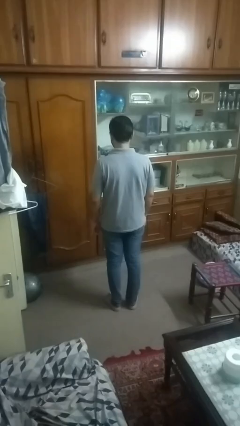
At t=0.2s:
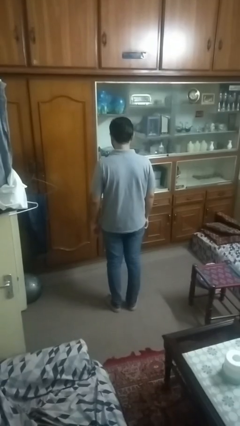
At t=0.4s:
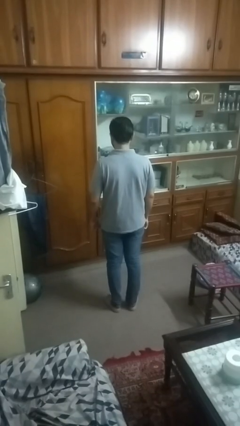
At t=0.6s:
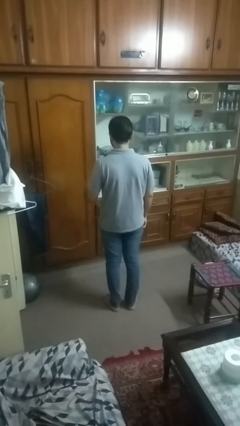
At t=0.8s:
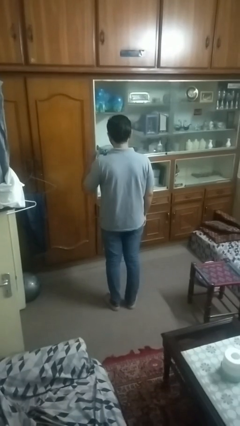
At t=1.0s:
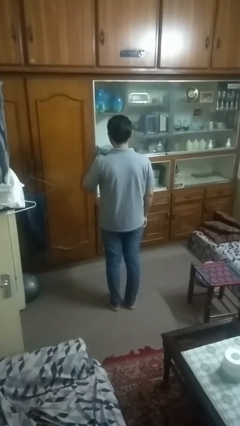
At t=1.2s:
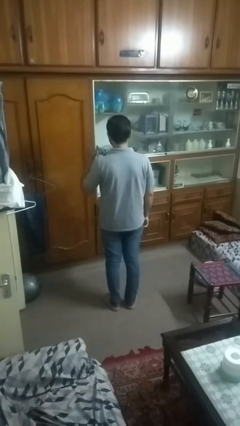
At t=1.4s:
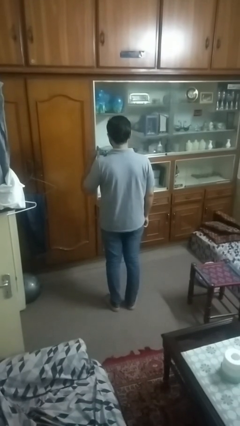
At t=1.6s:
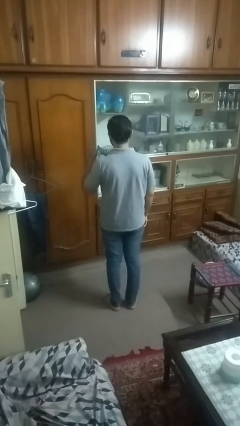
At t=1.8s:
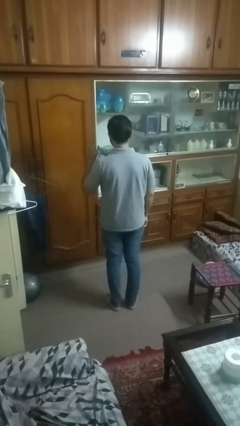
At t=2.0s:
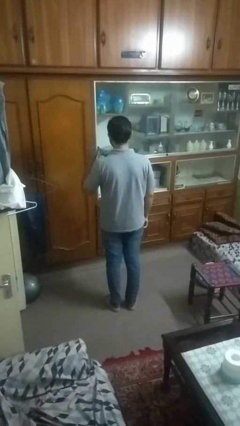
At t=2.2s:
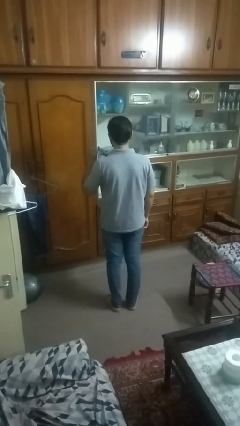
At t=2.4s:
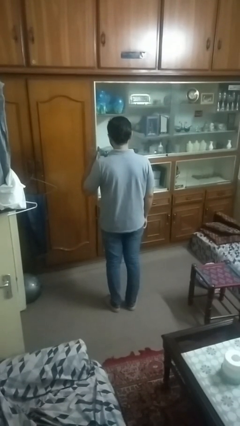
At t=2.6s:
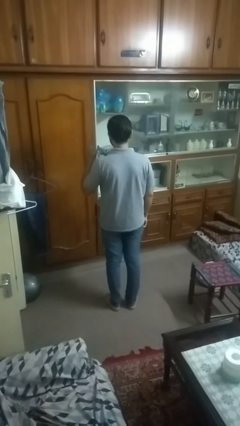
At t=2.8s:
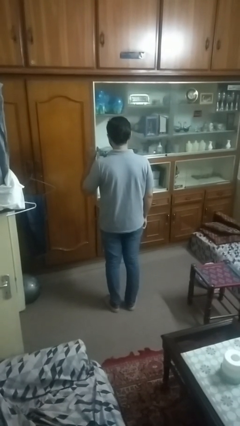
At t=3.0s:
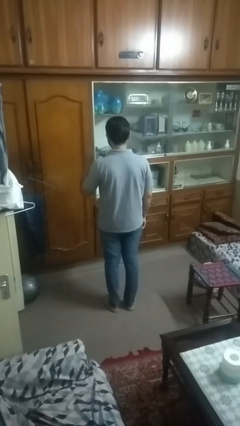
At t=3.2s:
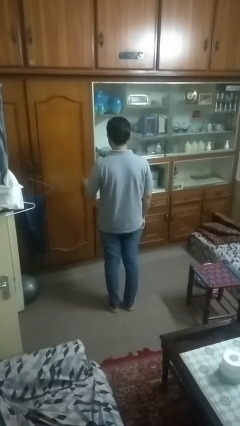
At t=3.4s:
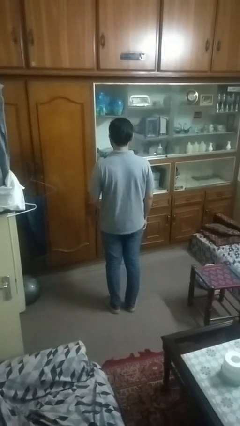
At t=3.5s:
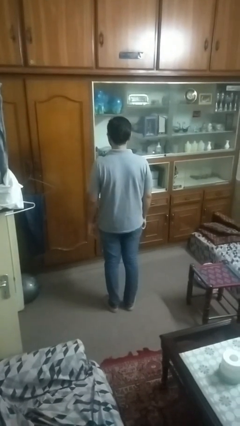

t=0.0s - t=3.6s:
person gestures number one

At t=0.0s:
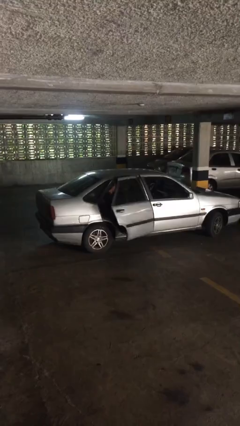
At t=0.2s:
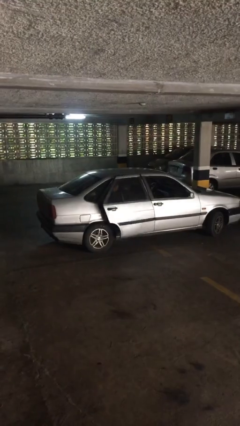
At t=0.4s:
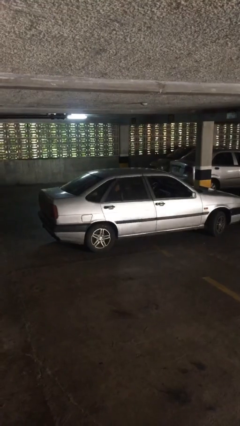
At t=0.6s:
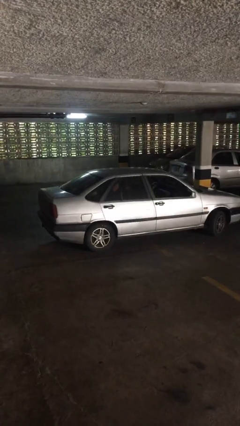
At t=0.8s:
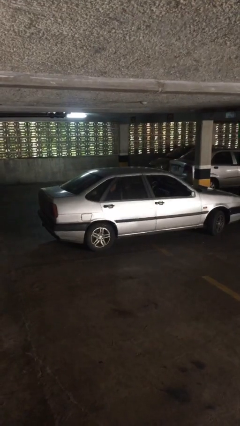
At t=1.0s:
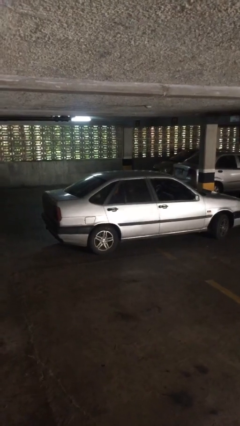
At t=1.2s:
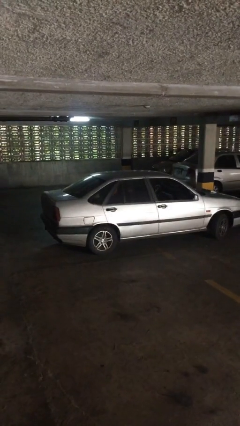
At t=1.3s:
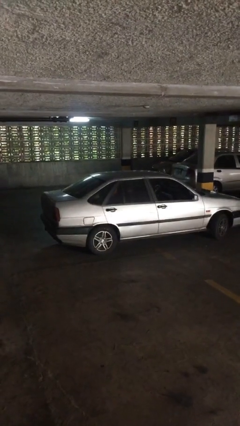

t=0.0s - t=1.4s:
person closes car door

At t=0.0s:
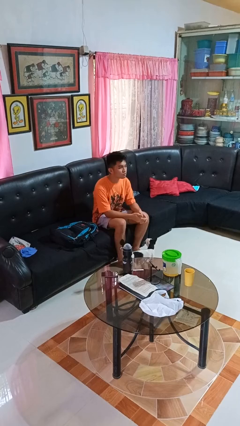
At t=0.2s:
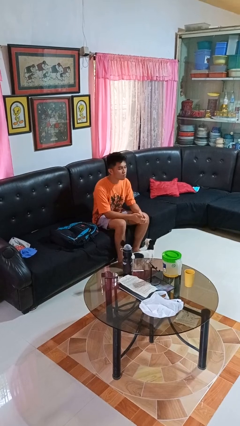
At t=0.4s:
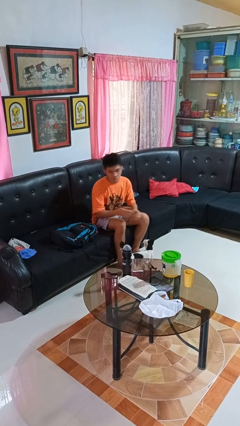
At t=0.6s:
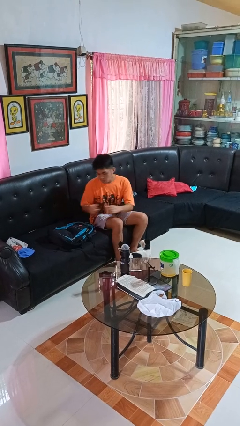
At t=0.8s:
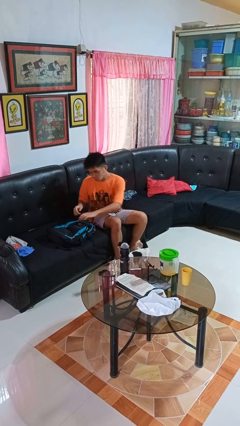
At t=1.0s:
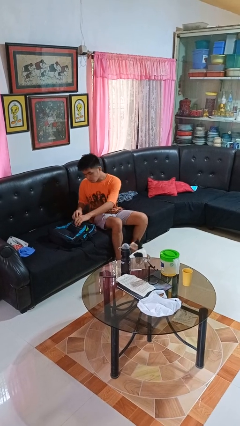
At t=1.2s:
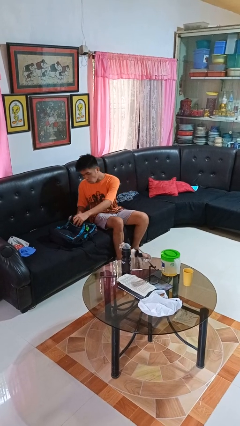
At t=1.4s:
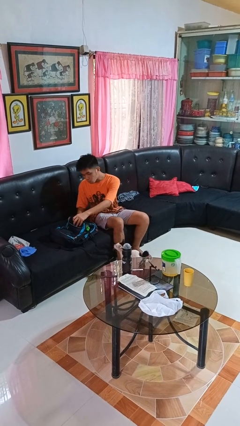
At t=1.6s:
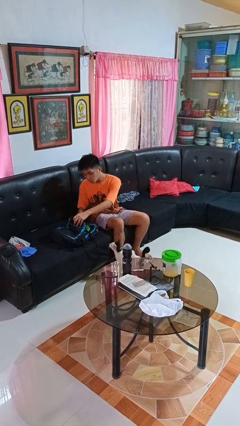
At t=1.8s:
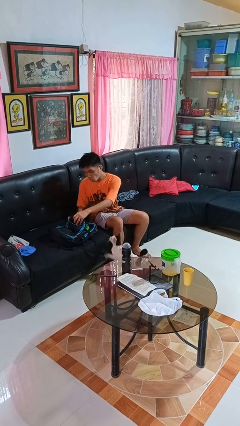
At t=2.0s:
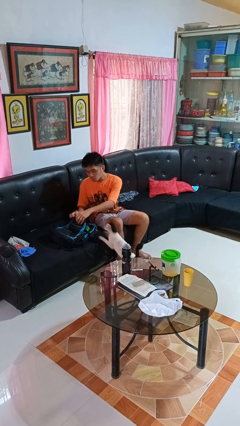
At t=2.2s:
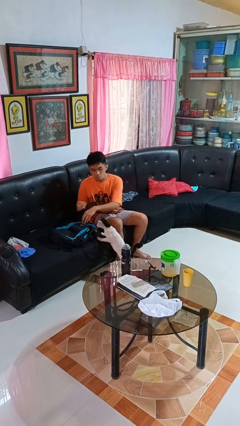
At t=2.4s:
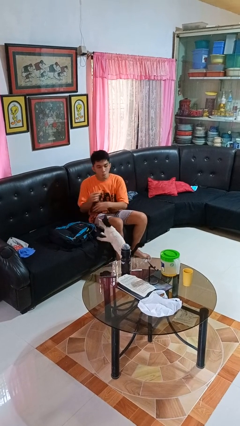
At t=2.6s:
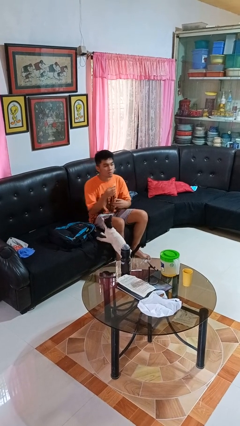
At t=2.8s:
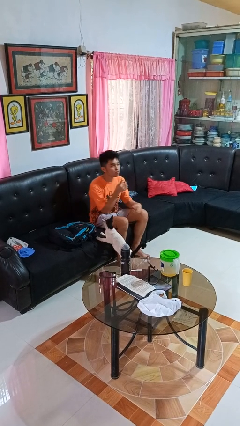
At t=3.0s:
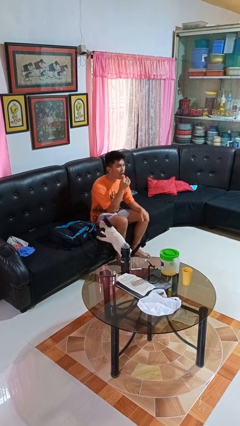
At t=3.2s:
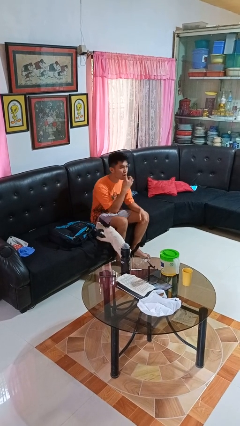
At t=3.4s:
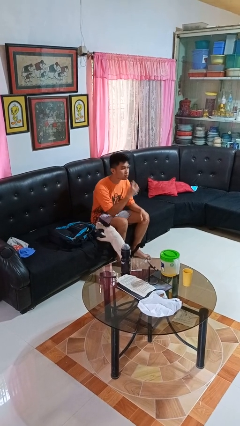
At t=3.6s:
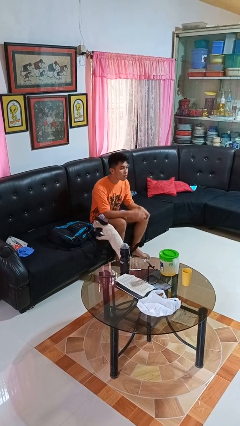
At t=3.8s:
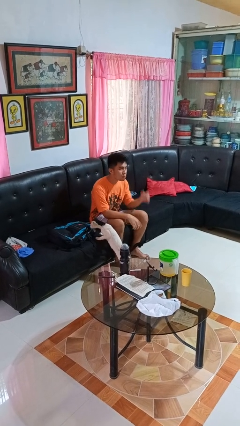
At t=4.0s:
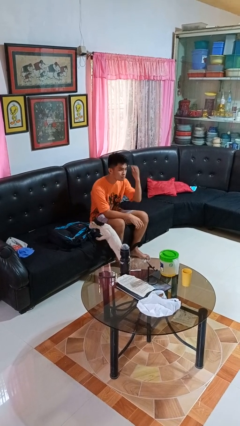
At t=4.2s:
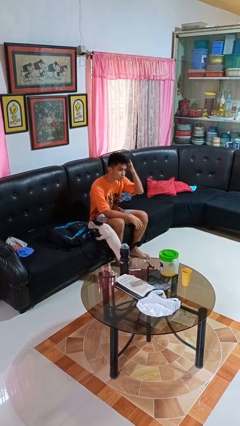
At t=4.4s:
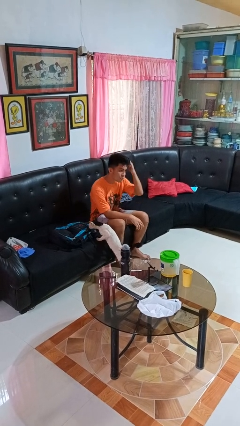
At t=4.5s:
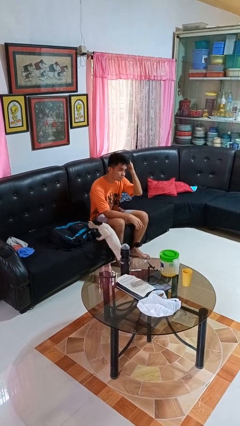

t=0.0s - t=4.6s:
person eats snack from bag

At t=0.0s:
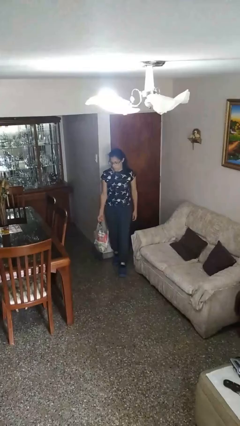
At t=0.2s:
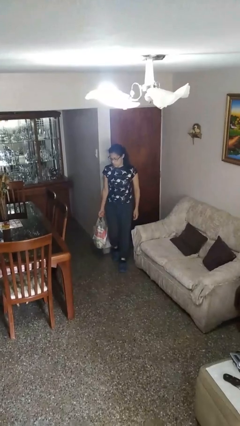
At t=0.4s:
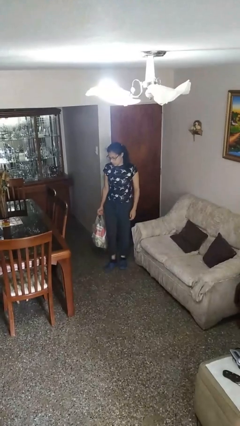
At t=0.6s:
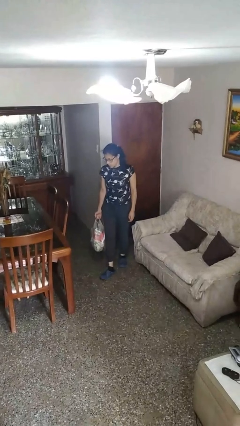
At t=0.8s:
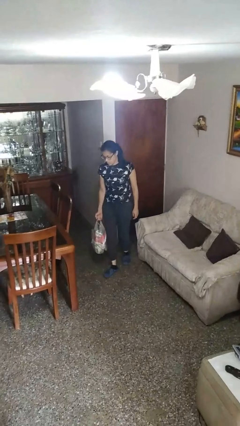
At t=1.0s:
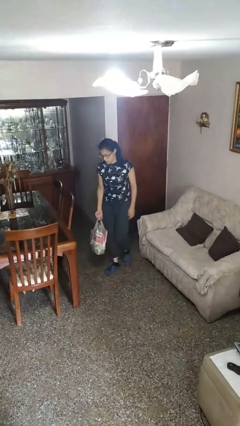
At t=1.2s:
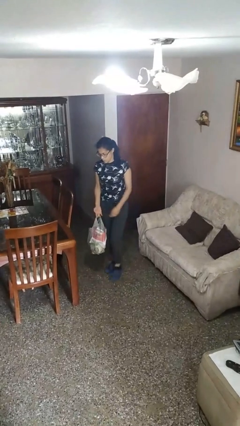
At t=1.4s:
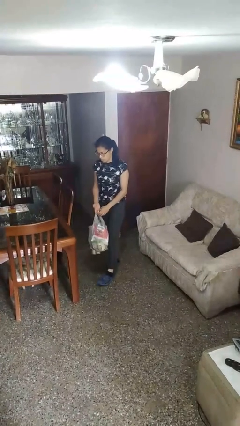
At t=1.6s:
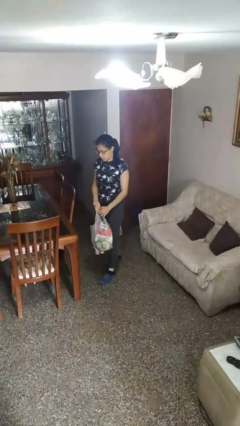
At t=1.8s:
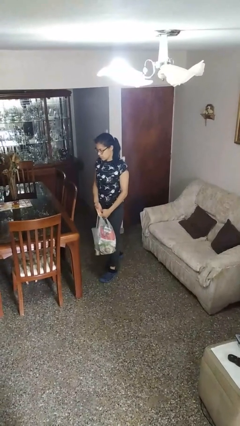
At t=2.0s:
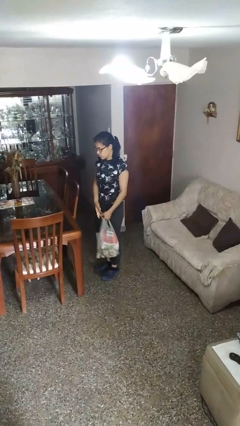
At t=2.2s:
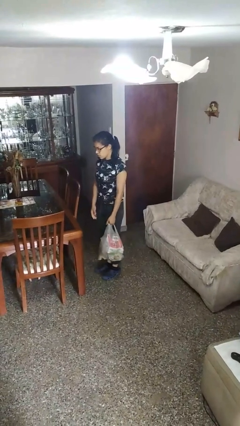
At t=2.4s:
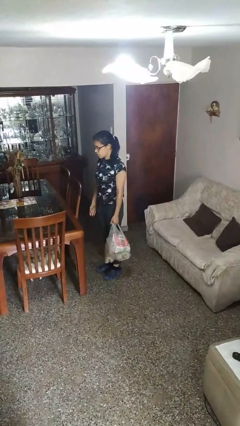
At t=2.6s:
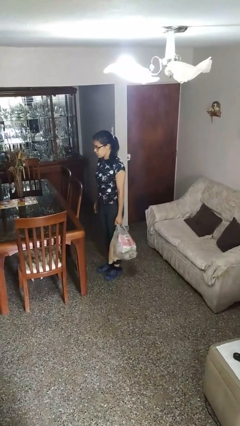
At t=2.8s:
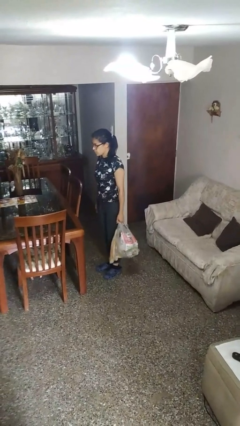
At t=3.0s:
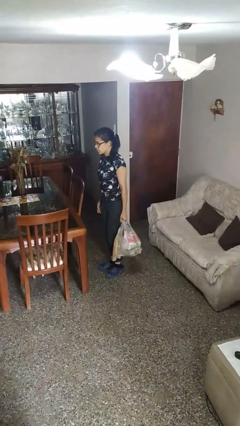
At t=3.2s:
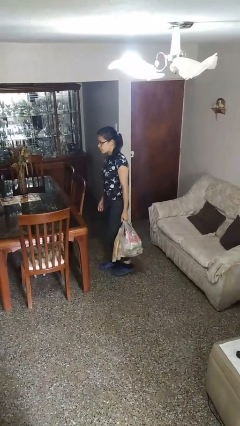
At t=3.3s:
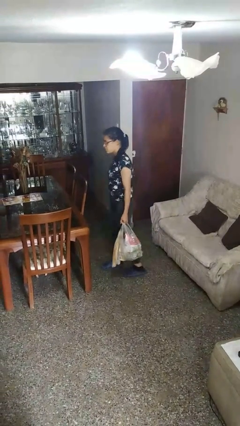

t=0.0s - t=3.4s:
person carries groceries

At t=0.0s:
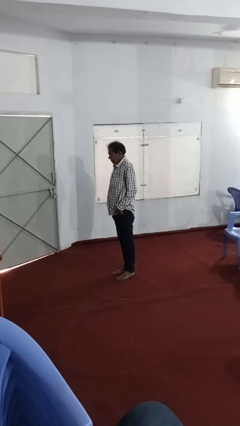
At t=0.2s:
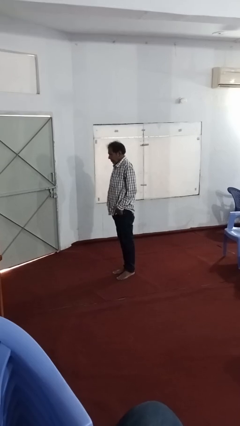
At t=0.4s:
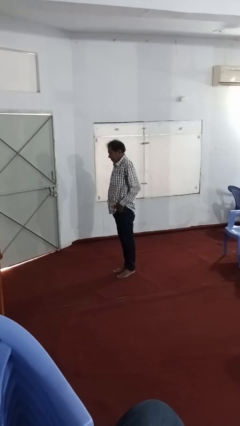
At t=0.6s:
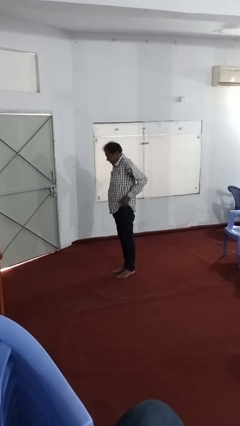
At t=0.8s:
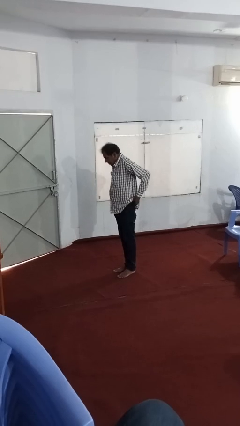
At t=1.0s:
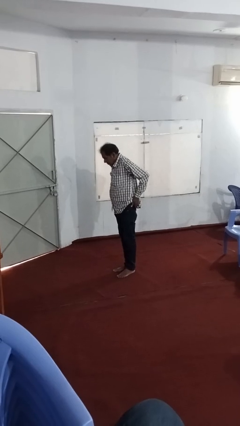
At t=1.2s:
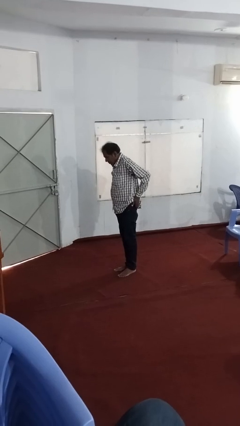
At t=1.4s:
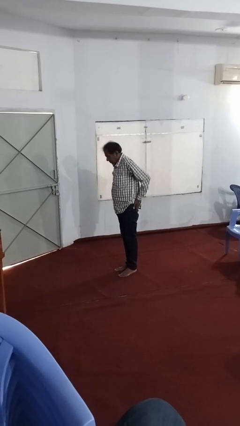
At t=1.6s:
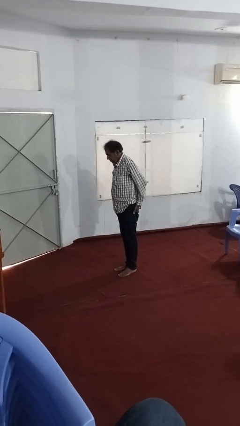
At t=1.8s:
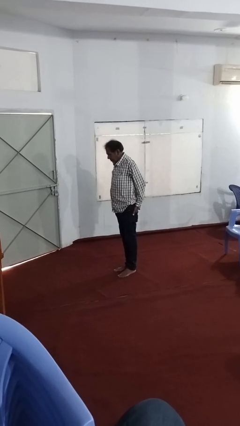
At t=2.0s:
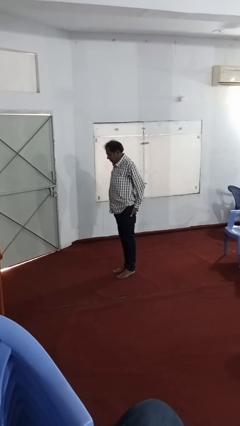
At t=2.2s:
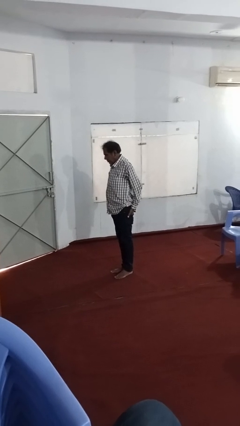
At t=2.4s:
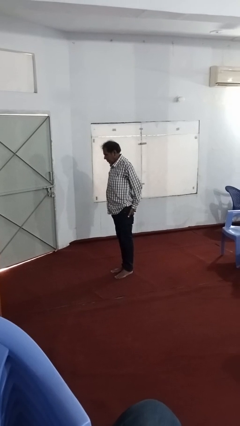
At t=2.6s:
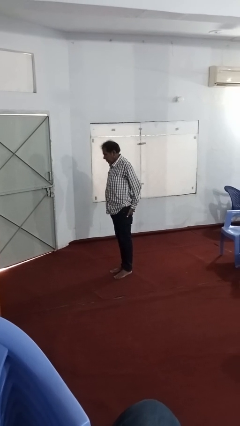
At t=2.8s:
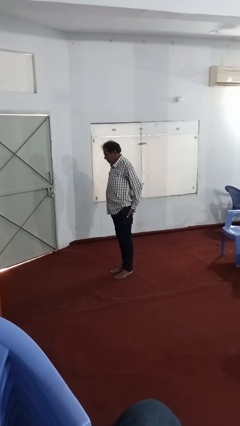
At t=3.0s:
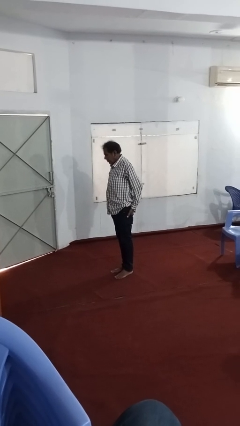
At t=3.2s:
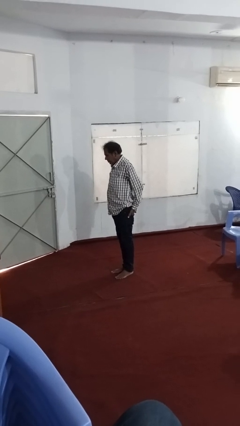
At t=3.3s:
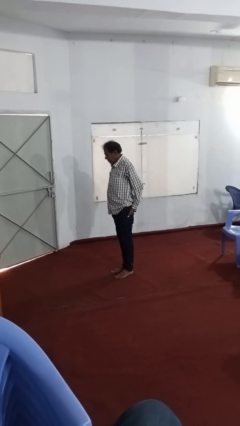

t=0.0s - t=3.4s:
person puts hands in back pockets

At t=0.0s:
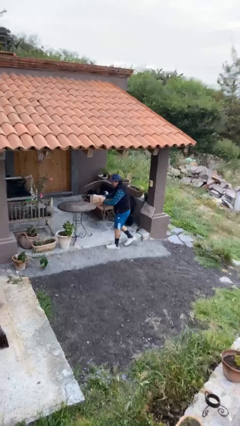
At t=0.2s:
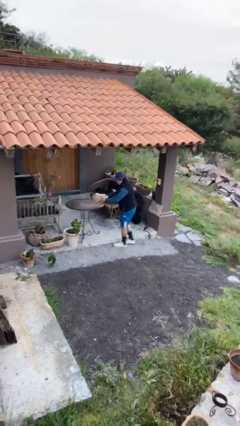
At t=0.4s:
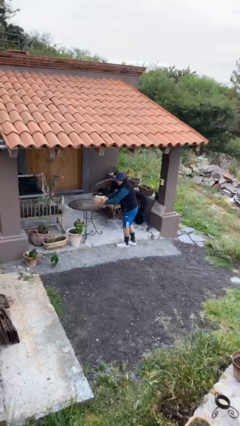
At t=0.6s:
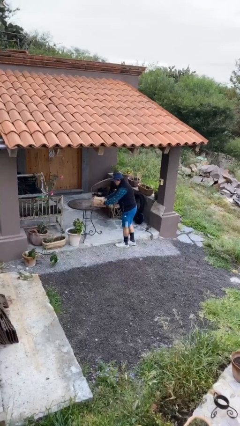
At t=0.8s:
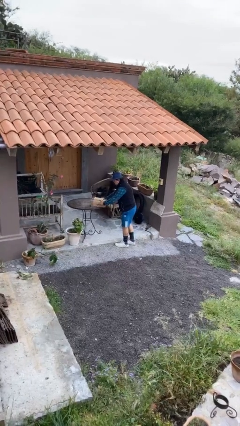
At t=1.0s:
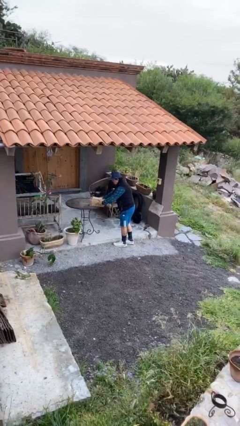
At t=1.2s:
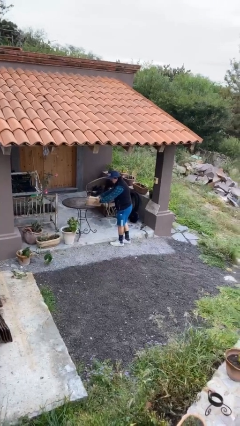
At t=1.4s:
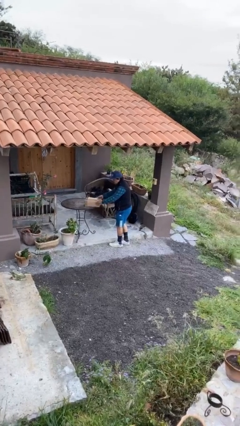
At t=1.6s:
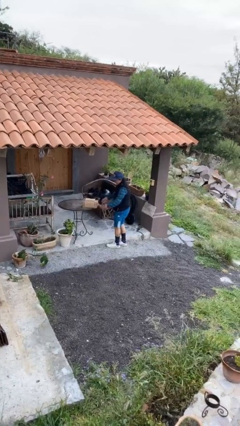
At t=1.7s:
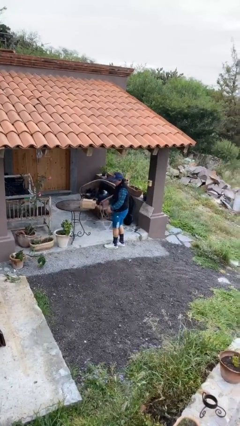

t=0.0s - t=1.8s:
person puts down object on table
